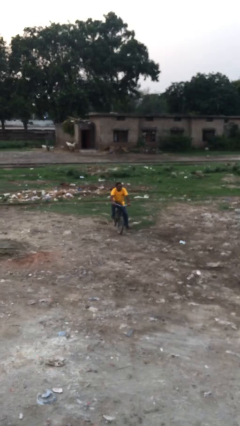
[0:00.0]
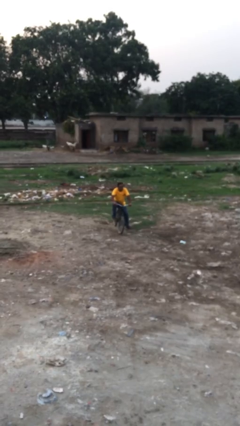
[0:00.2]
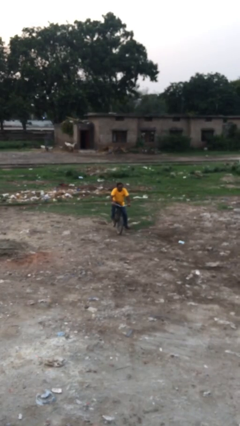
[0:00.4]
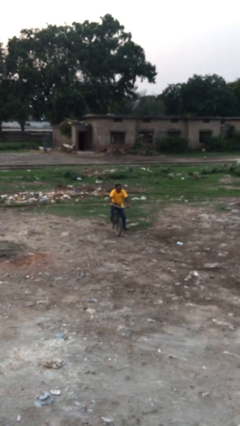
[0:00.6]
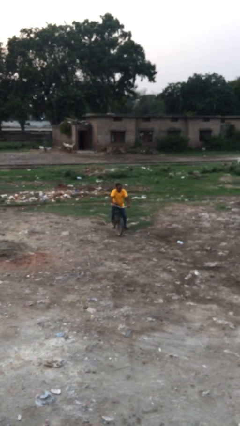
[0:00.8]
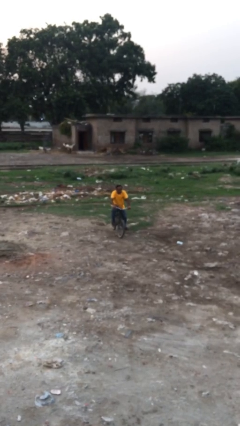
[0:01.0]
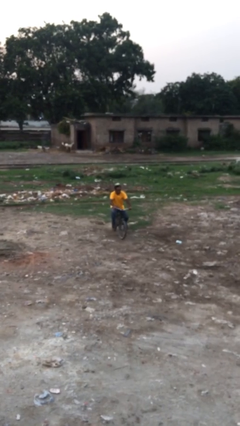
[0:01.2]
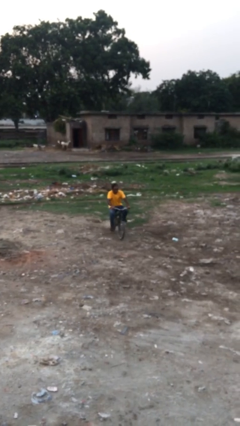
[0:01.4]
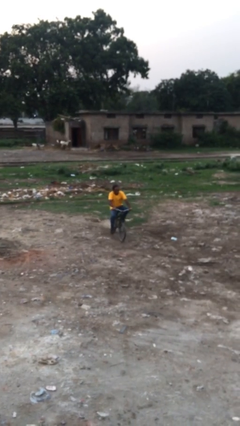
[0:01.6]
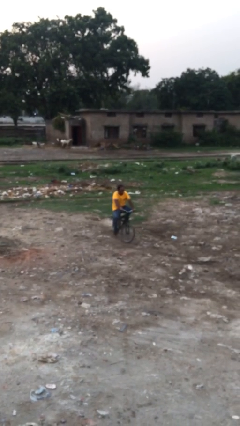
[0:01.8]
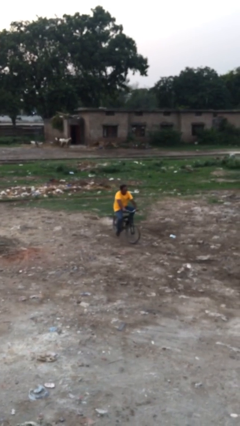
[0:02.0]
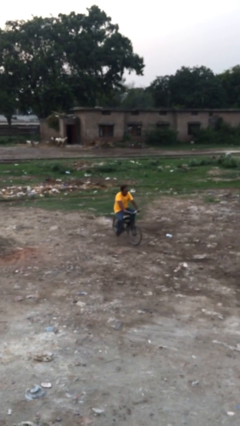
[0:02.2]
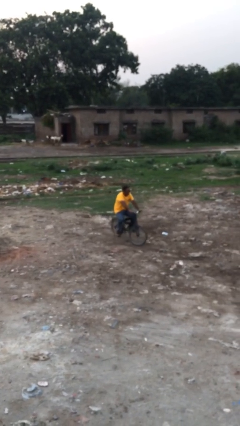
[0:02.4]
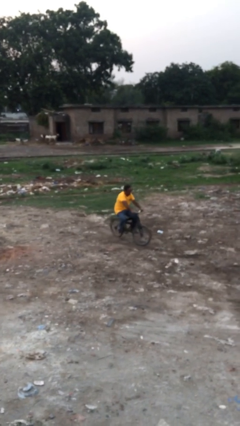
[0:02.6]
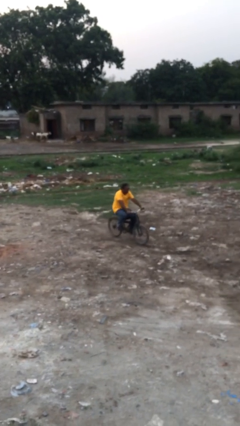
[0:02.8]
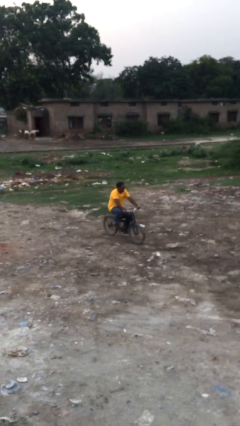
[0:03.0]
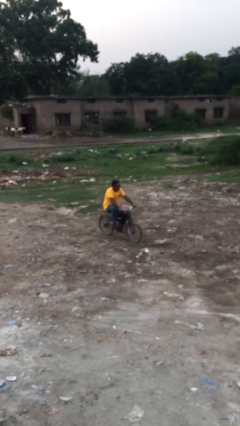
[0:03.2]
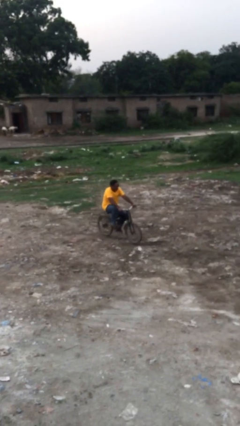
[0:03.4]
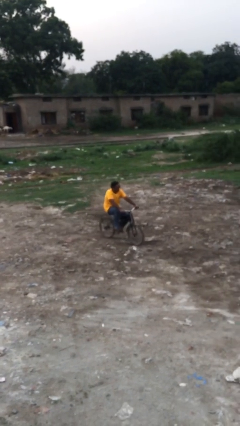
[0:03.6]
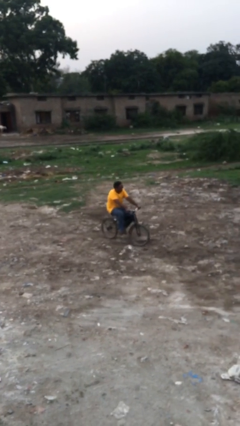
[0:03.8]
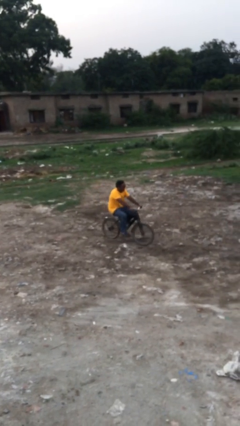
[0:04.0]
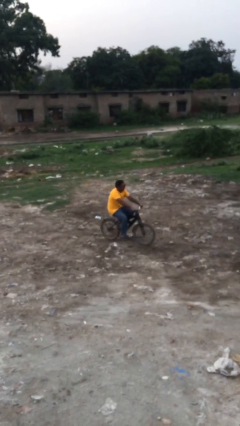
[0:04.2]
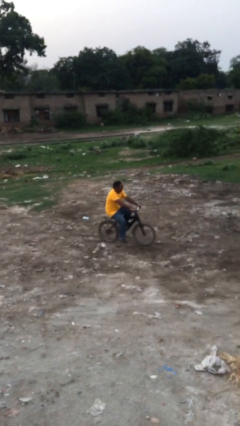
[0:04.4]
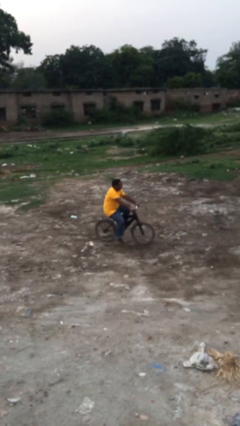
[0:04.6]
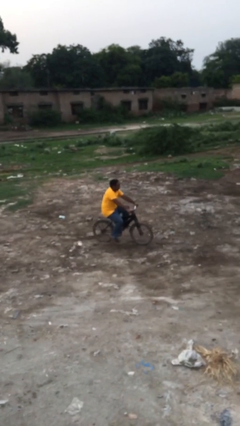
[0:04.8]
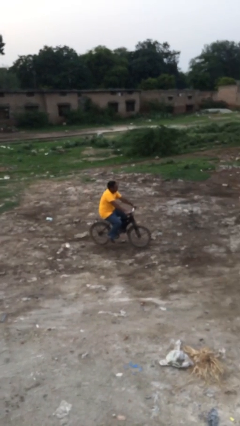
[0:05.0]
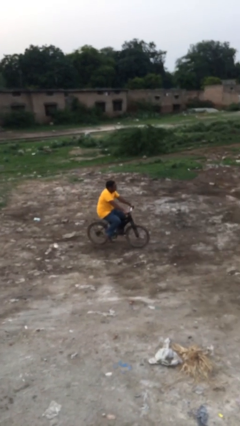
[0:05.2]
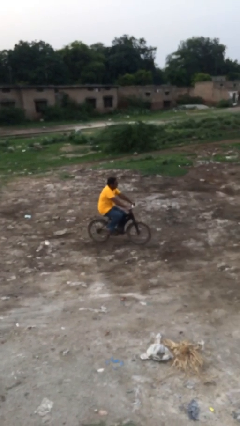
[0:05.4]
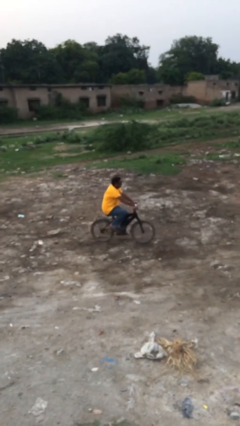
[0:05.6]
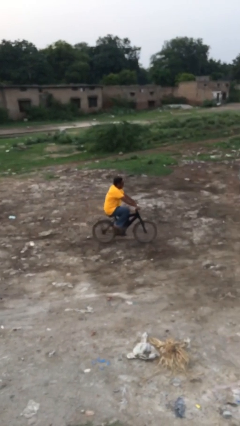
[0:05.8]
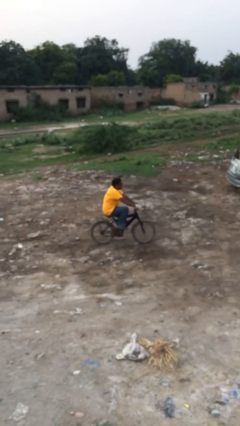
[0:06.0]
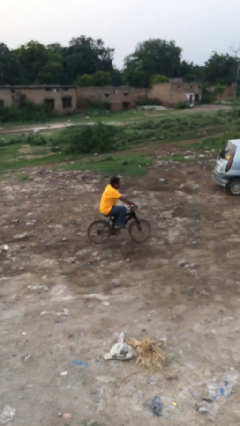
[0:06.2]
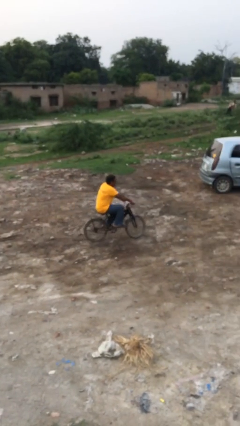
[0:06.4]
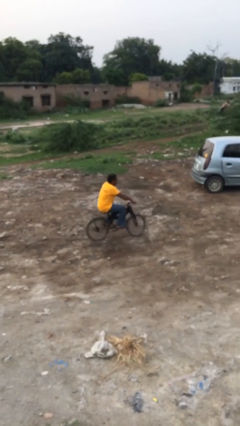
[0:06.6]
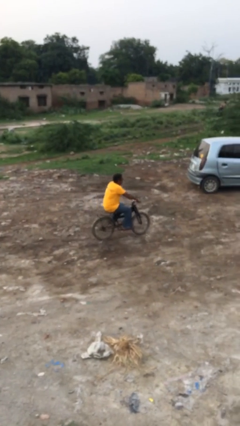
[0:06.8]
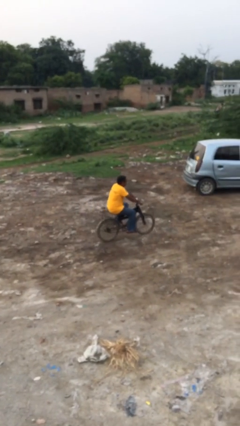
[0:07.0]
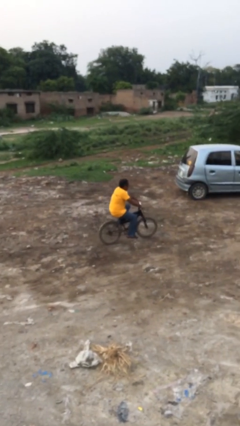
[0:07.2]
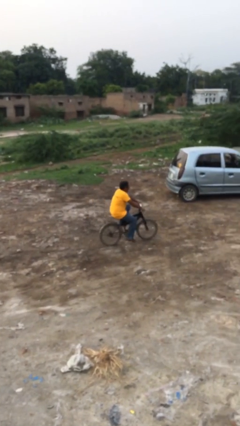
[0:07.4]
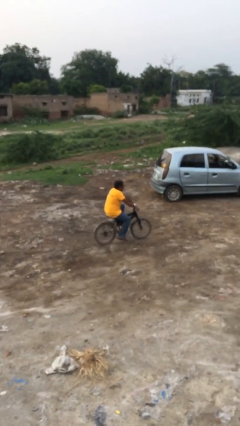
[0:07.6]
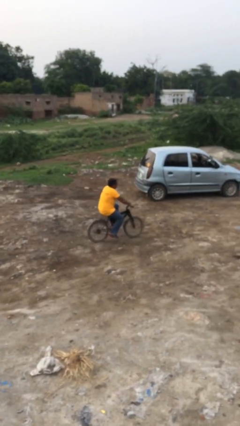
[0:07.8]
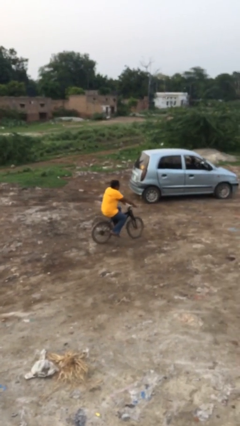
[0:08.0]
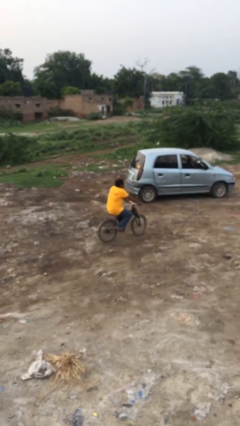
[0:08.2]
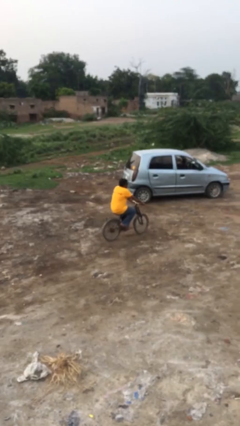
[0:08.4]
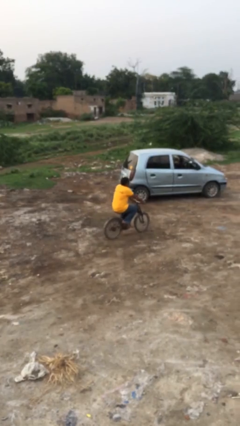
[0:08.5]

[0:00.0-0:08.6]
person rides bicycle

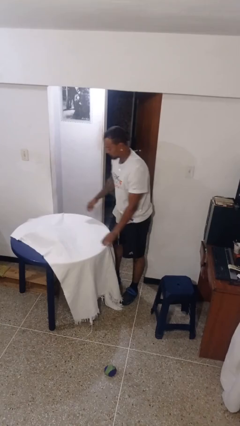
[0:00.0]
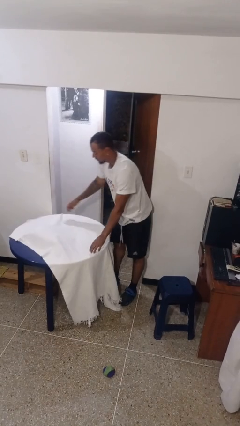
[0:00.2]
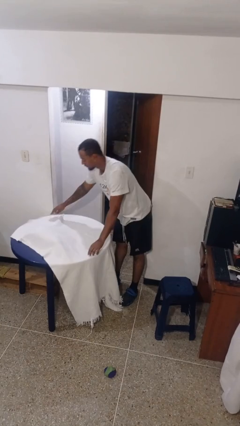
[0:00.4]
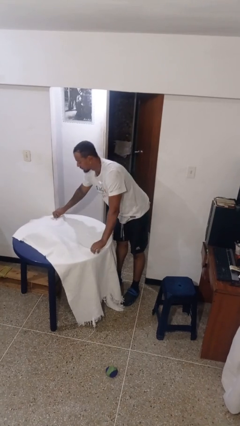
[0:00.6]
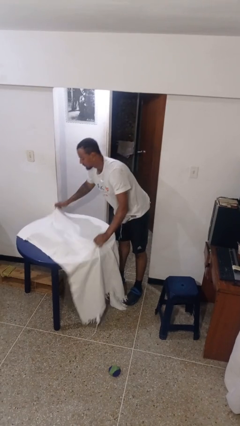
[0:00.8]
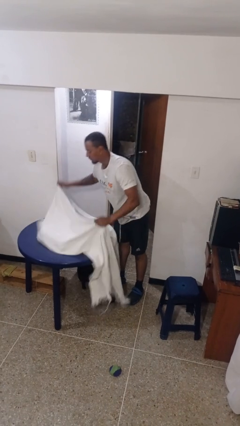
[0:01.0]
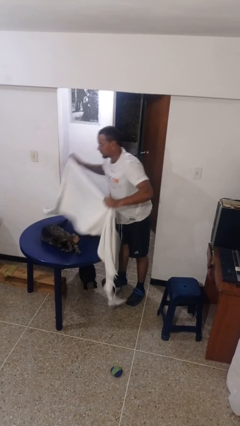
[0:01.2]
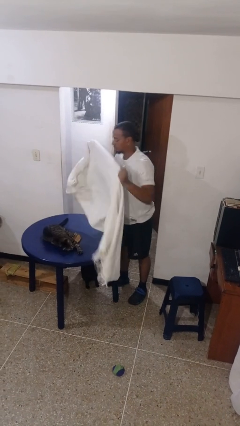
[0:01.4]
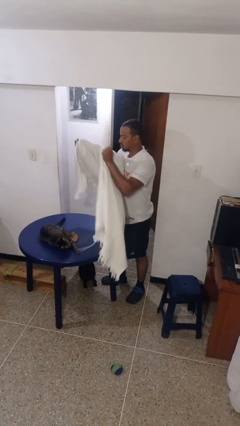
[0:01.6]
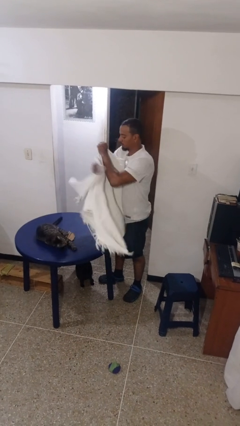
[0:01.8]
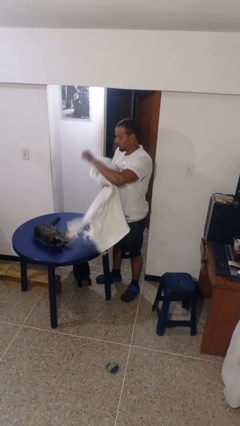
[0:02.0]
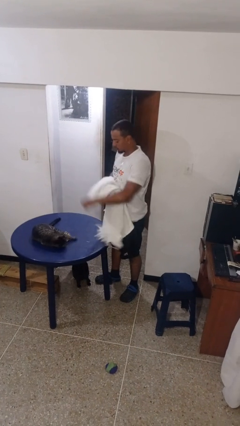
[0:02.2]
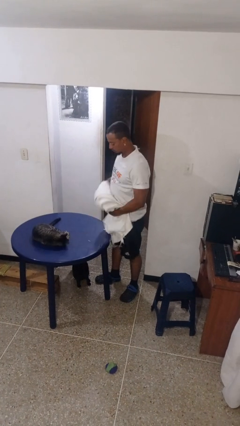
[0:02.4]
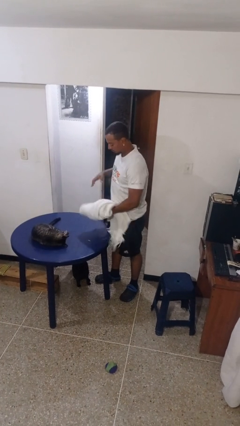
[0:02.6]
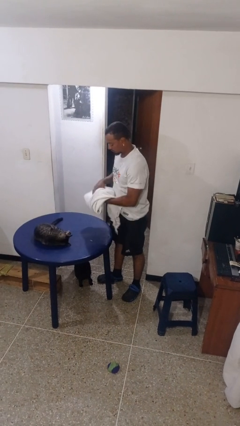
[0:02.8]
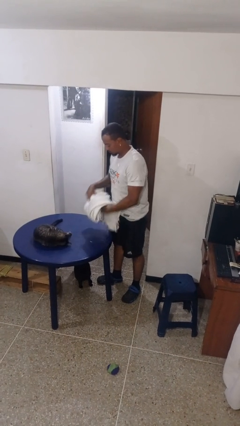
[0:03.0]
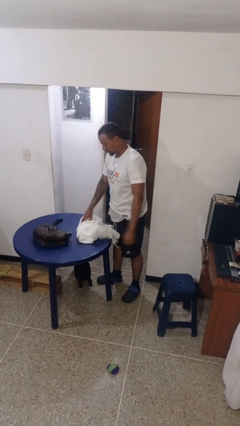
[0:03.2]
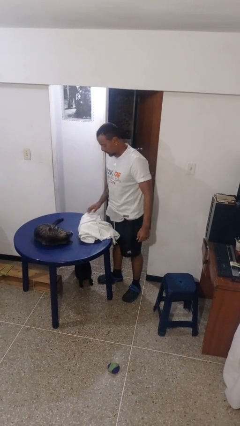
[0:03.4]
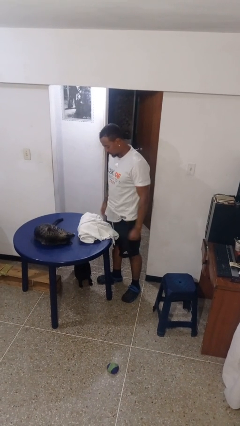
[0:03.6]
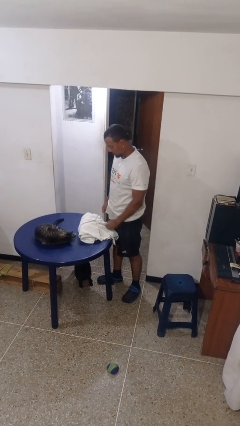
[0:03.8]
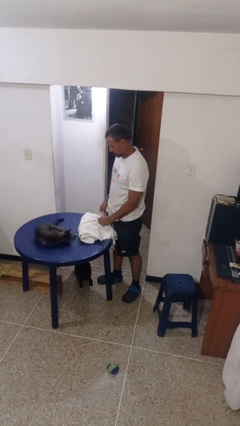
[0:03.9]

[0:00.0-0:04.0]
person folds tablecloth

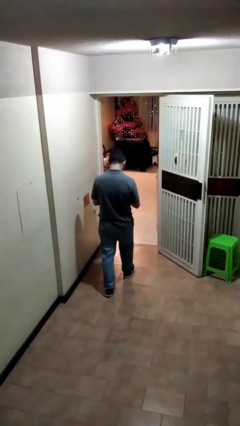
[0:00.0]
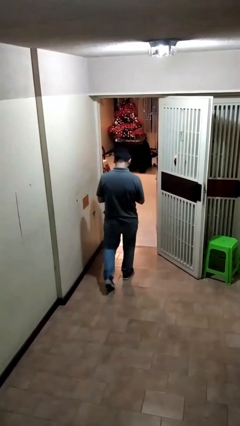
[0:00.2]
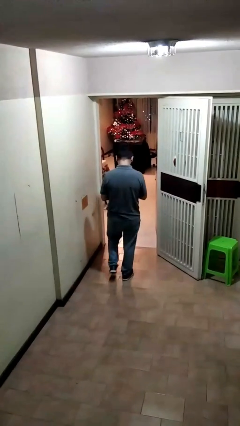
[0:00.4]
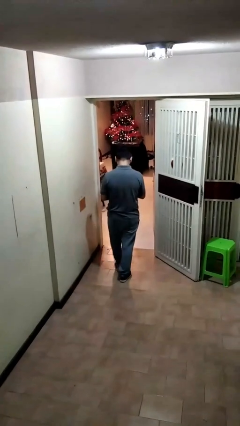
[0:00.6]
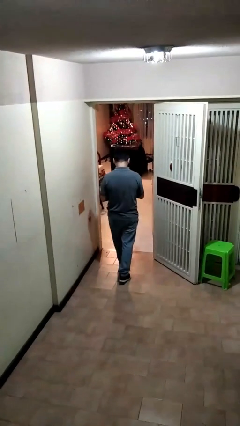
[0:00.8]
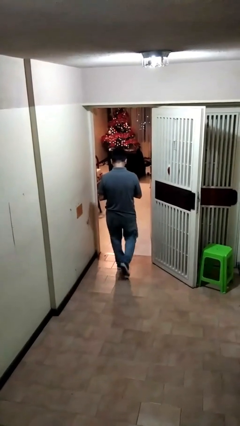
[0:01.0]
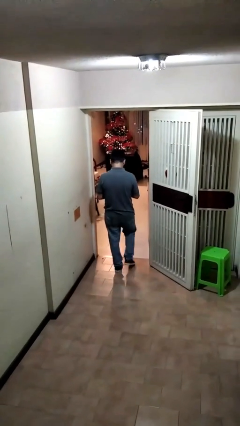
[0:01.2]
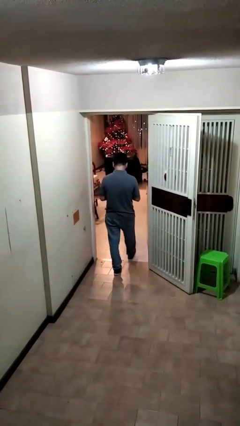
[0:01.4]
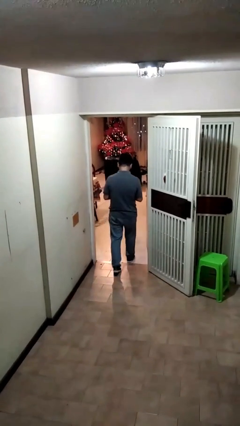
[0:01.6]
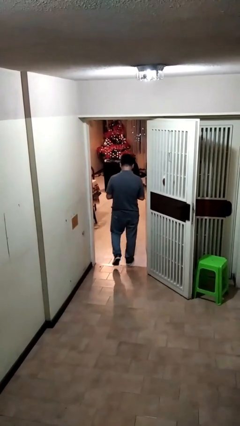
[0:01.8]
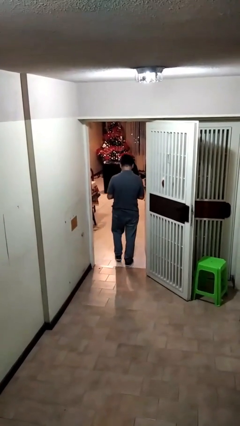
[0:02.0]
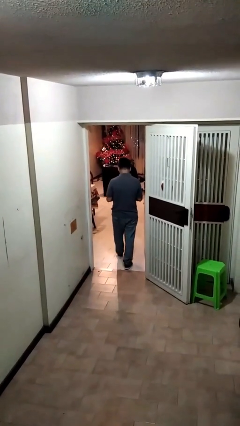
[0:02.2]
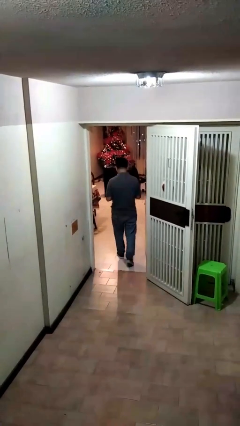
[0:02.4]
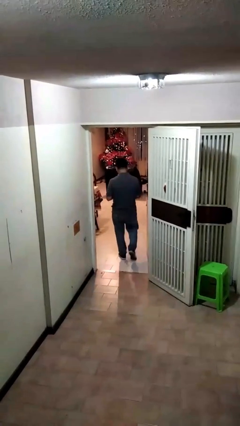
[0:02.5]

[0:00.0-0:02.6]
person exits scene through structure

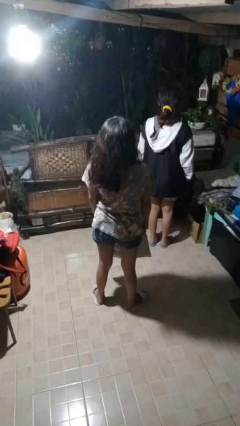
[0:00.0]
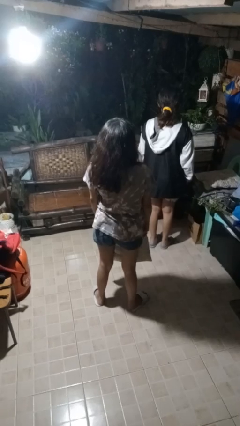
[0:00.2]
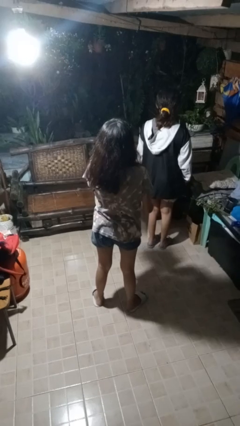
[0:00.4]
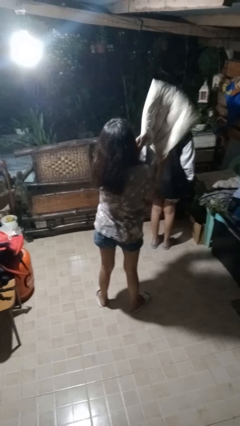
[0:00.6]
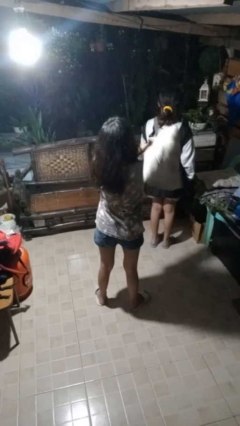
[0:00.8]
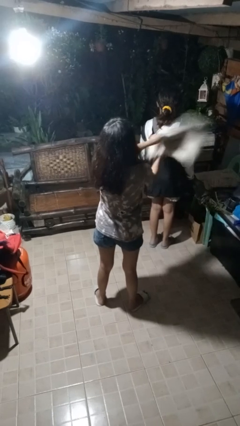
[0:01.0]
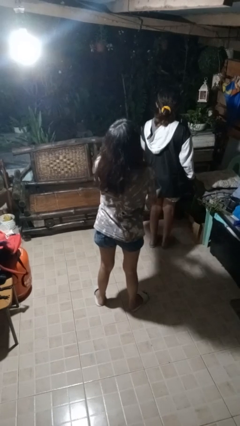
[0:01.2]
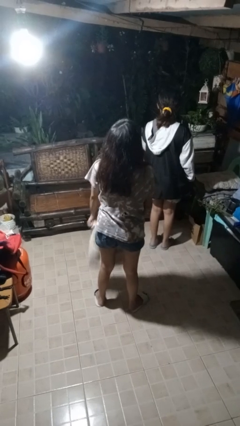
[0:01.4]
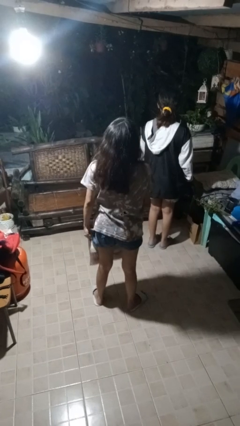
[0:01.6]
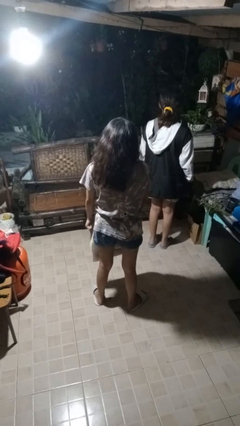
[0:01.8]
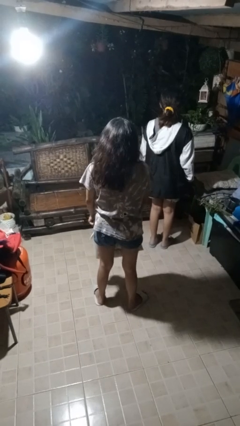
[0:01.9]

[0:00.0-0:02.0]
person hits person with pillow

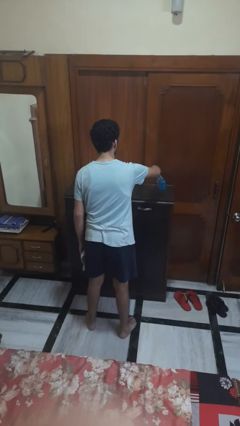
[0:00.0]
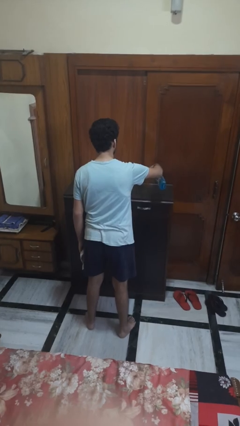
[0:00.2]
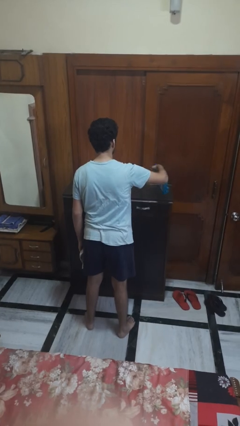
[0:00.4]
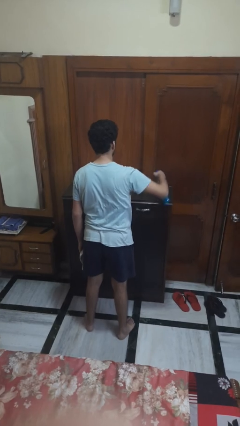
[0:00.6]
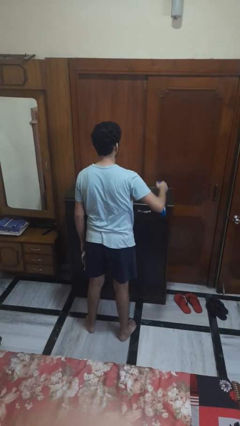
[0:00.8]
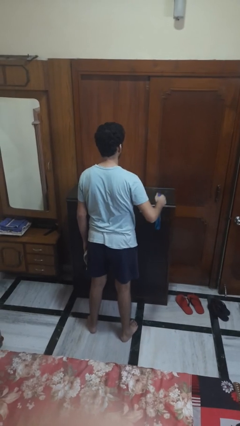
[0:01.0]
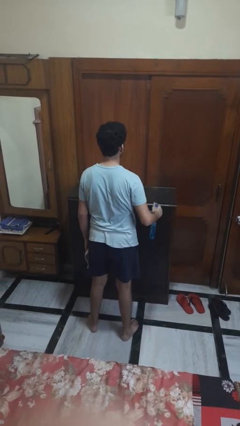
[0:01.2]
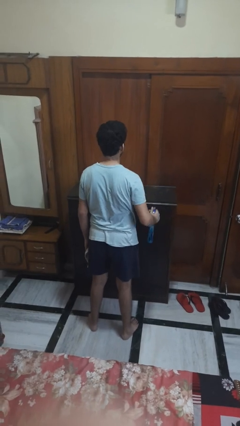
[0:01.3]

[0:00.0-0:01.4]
person sprays from bottle
